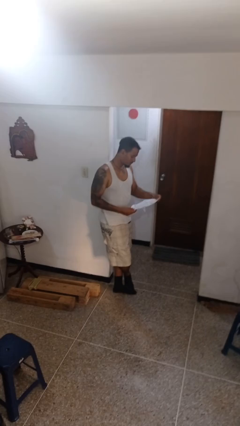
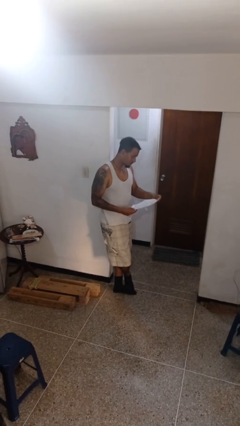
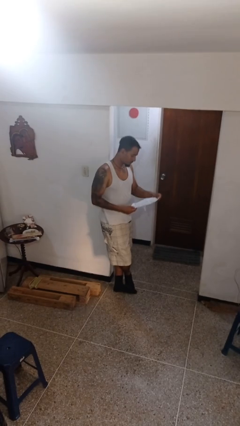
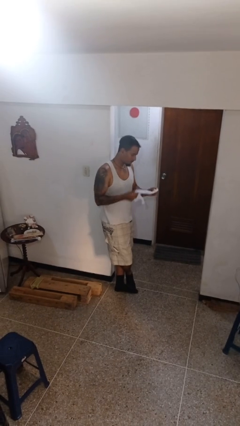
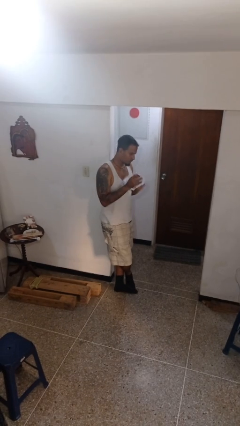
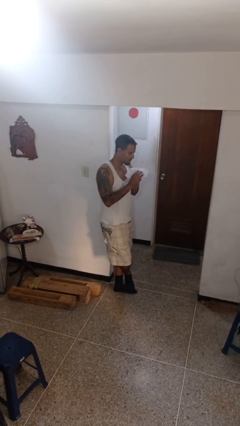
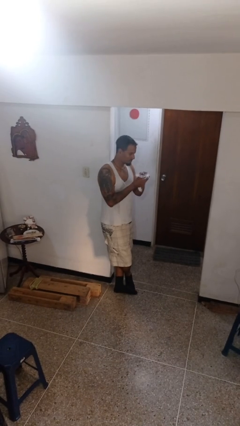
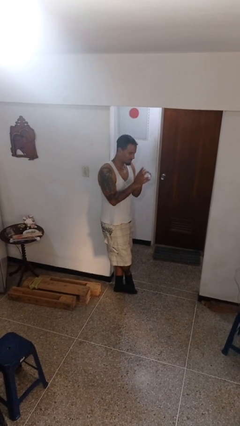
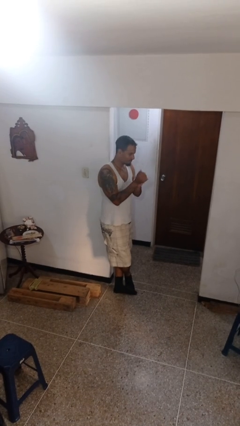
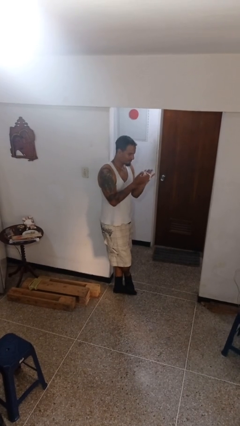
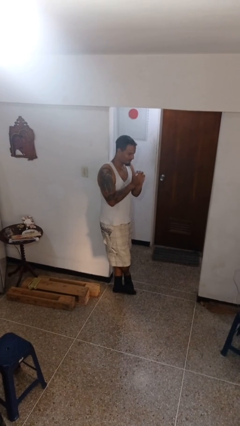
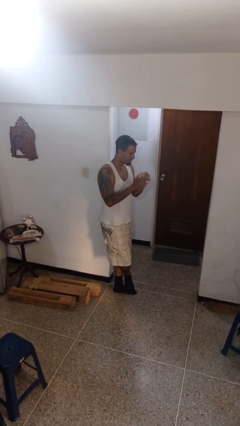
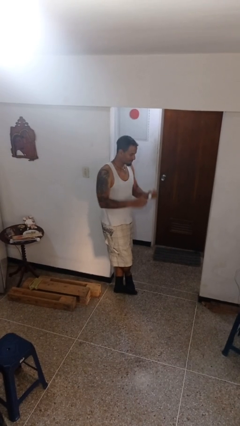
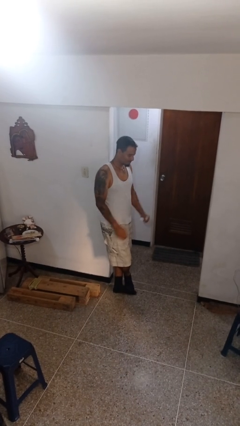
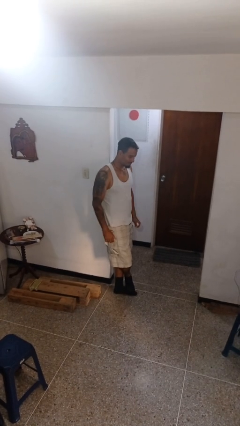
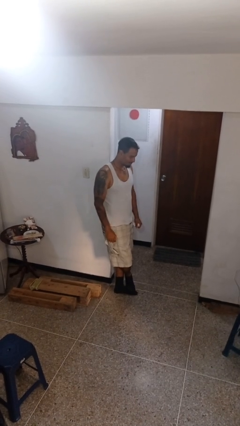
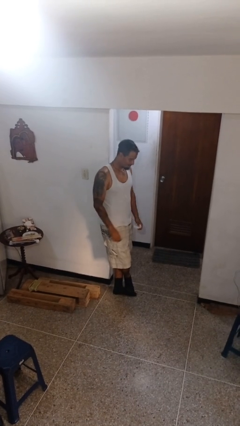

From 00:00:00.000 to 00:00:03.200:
person crumples paper

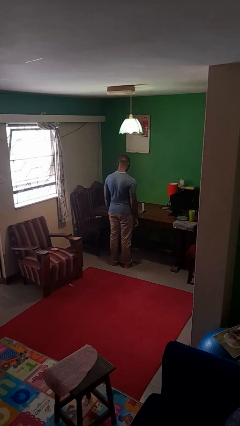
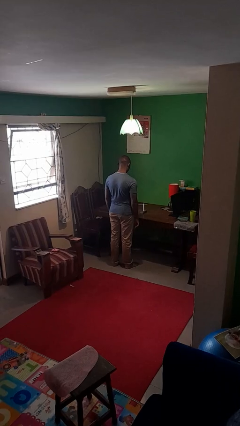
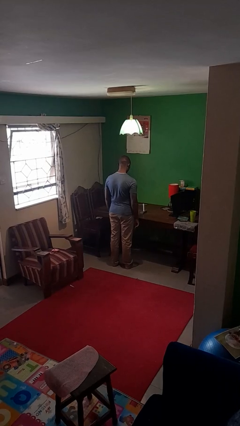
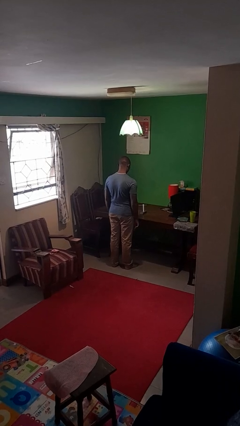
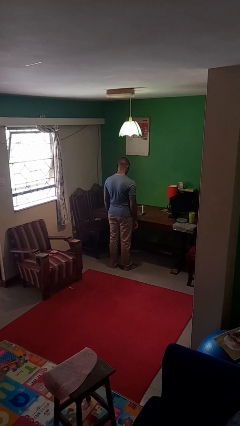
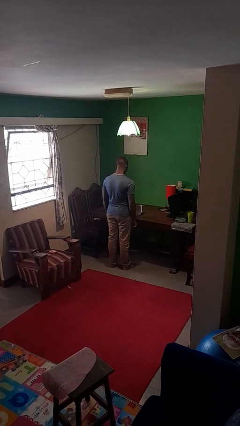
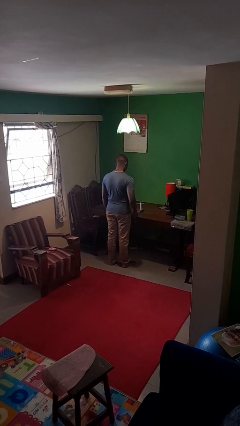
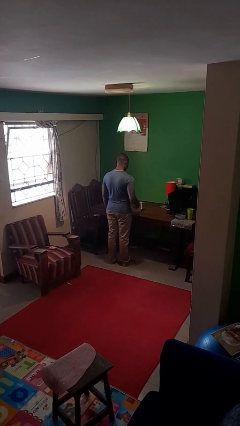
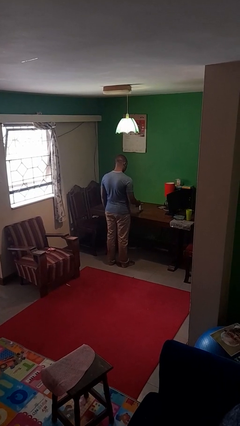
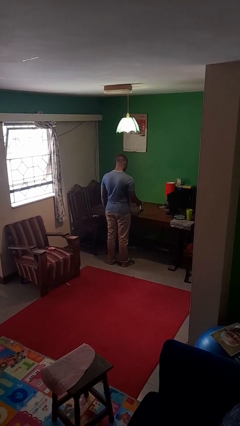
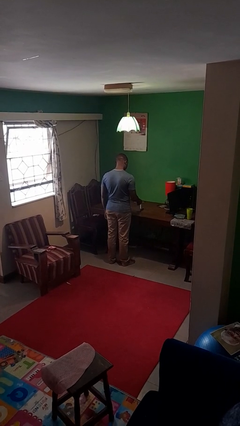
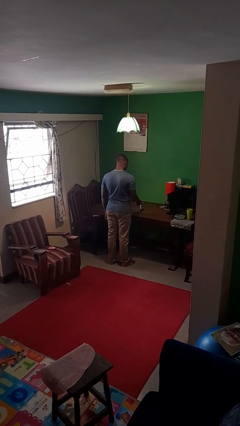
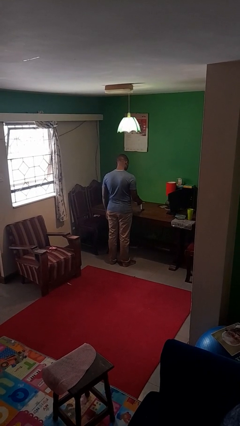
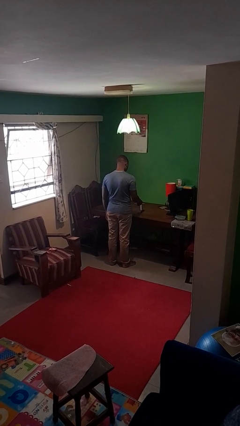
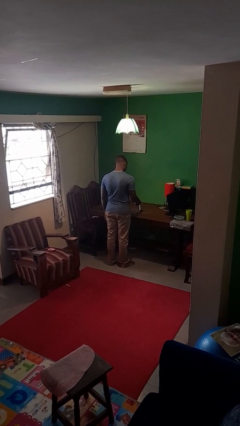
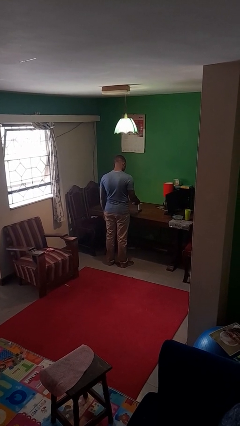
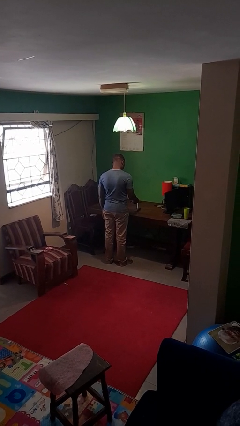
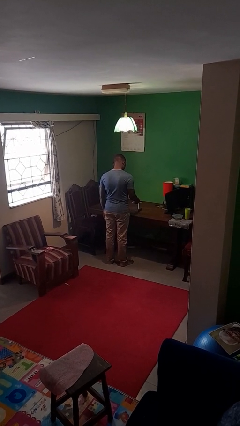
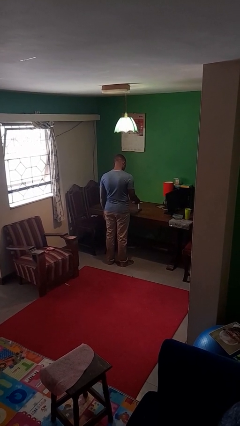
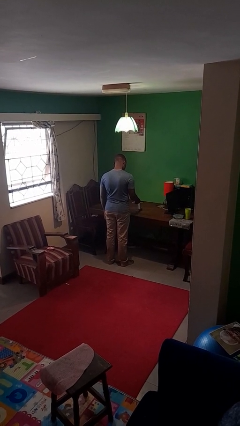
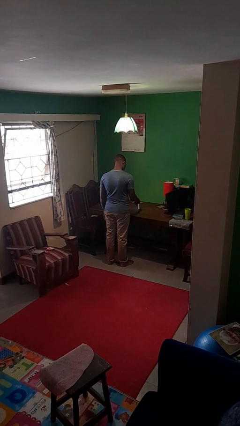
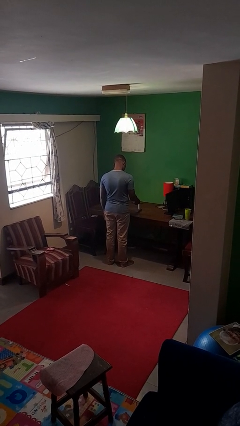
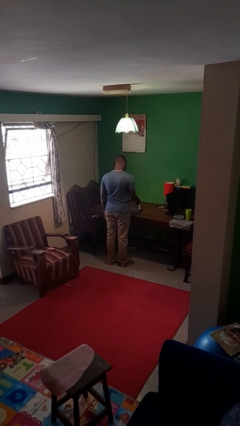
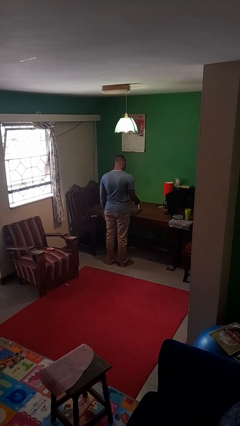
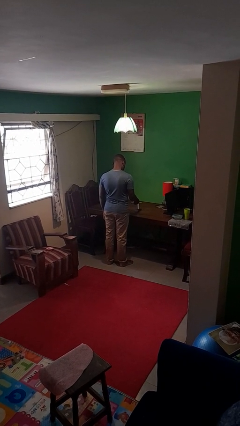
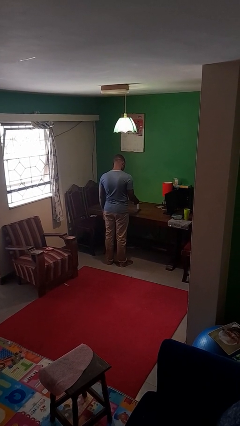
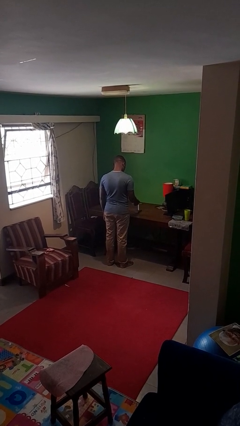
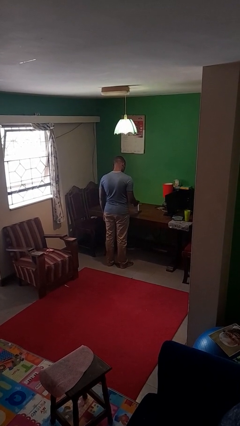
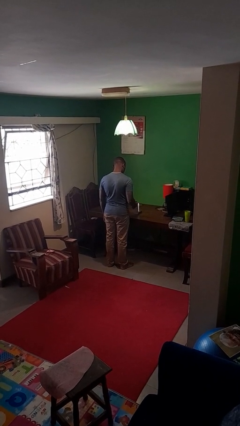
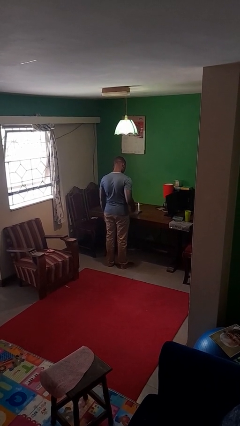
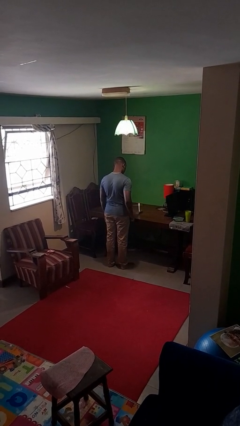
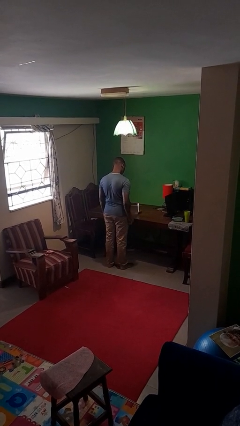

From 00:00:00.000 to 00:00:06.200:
person lights candle

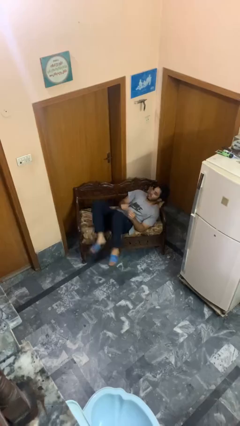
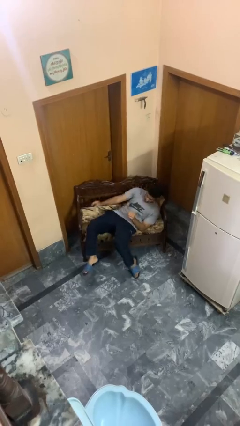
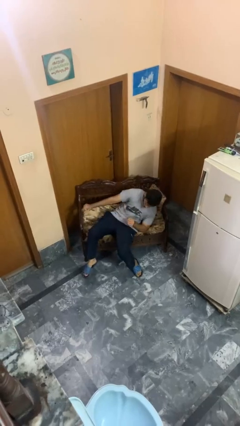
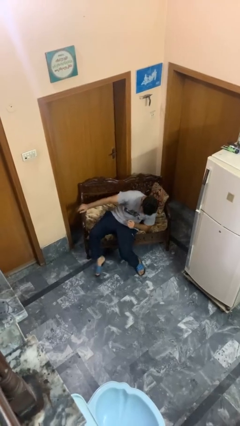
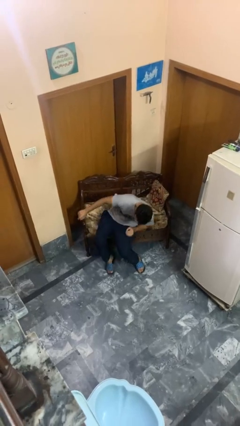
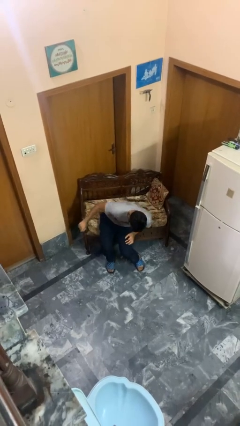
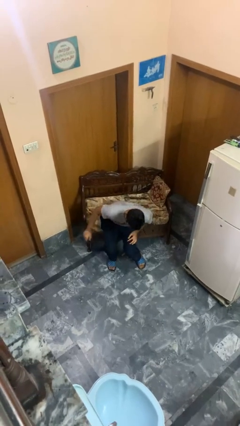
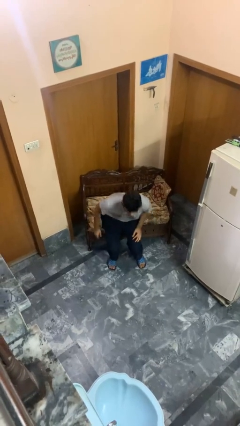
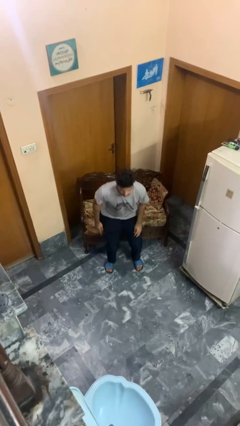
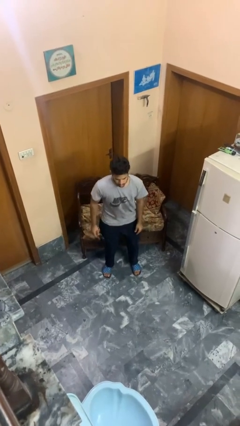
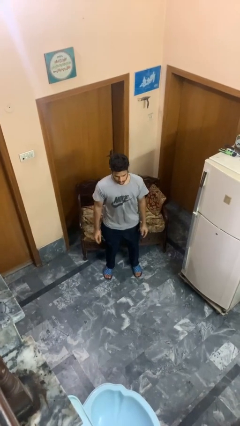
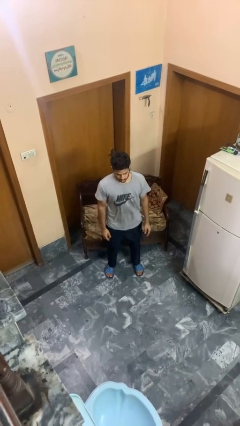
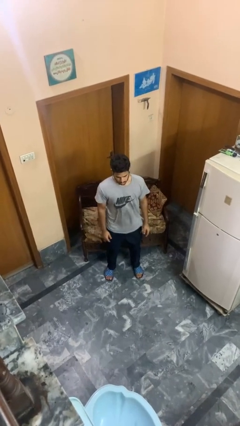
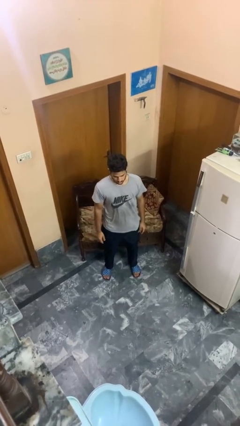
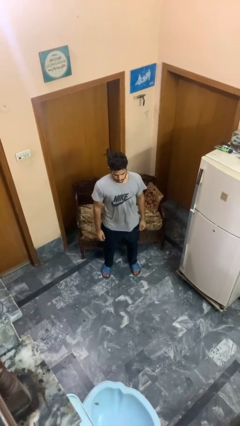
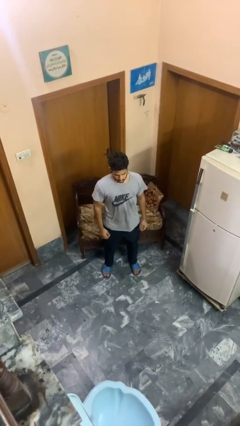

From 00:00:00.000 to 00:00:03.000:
person stands up

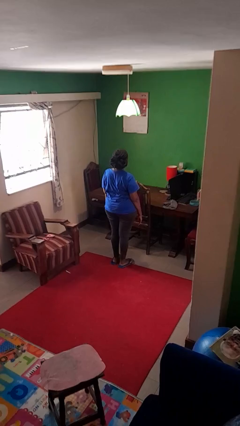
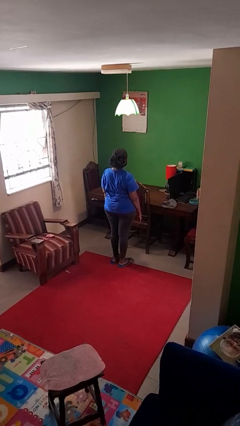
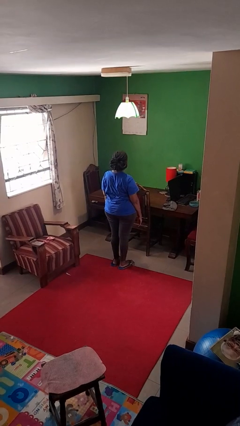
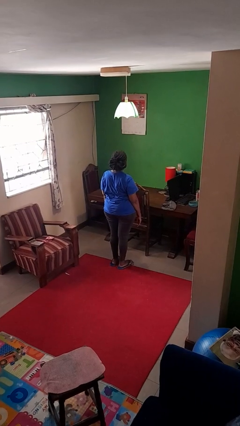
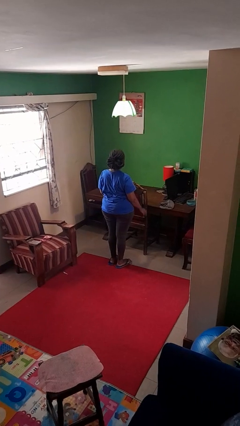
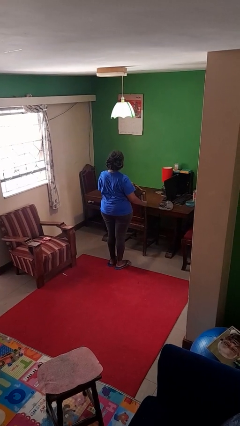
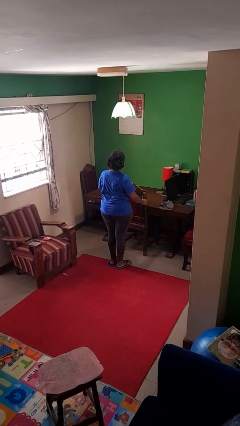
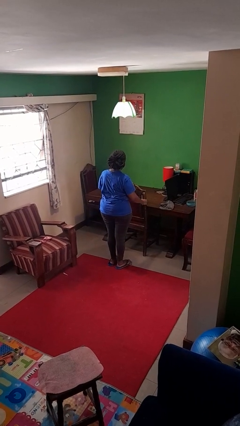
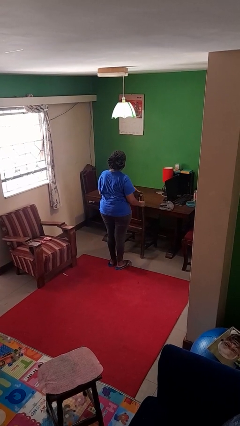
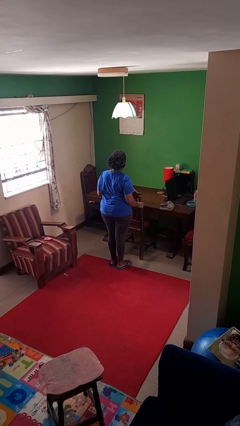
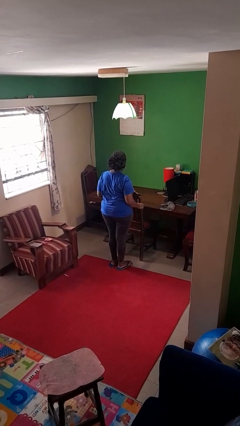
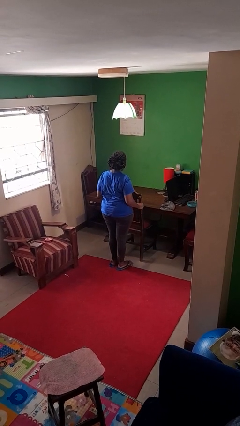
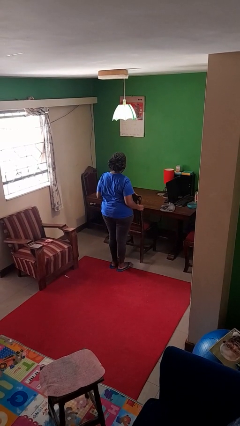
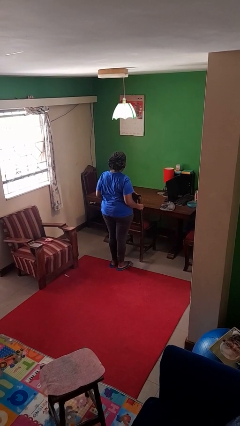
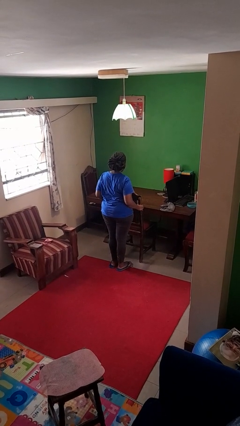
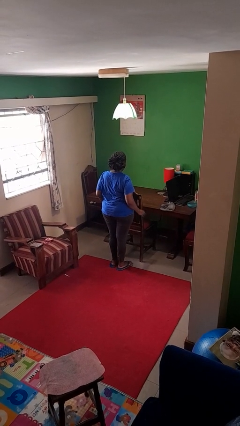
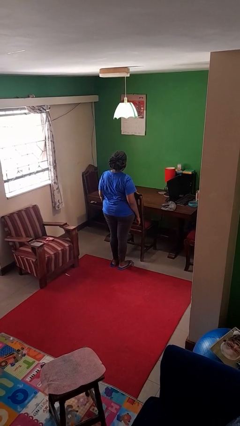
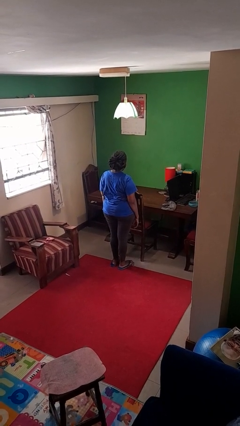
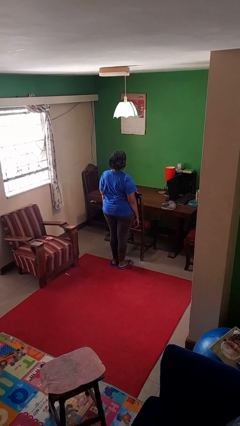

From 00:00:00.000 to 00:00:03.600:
person pulls out chair

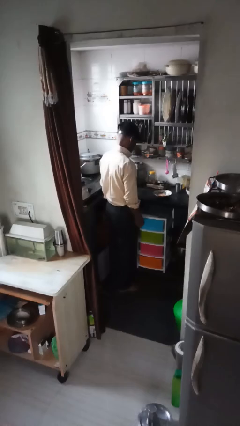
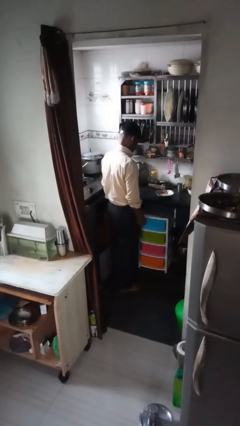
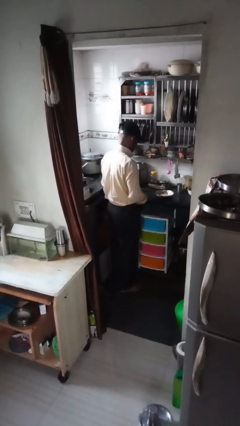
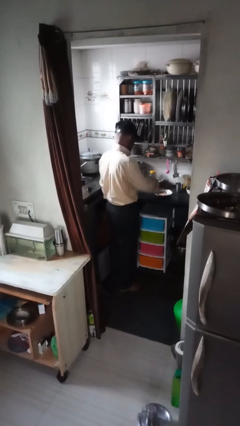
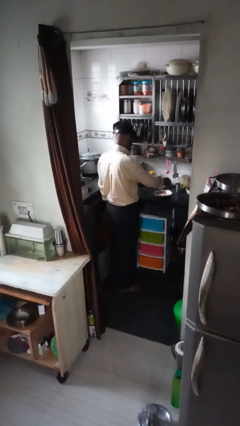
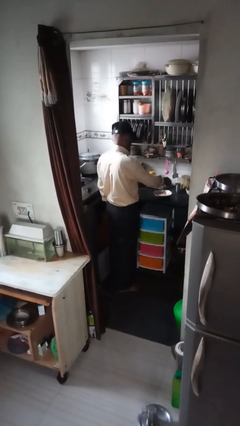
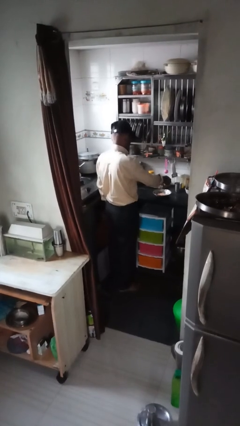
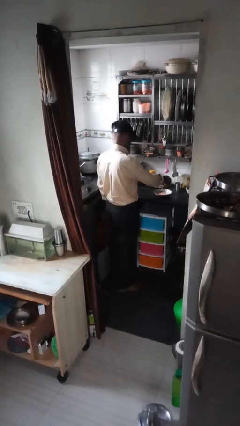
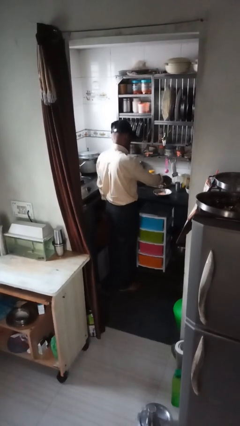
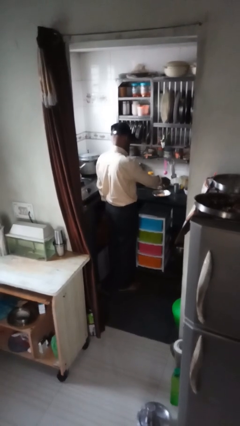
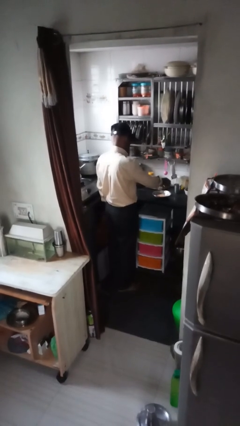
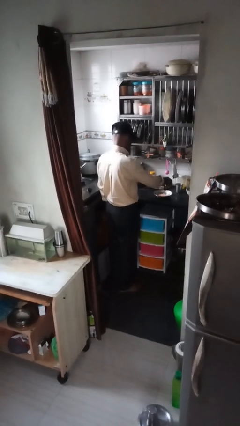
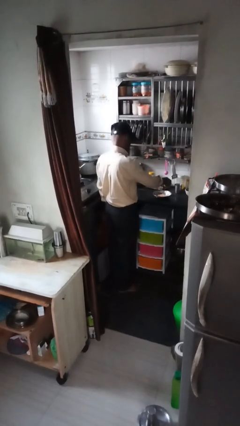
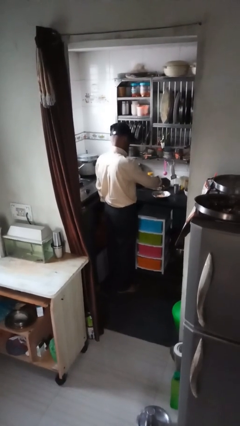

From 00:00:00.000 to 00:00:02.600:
person pours into bowl
